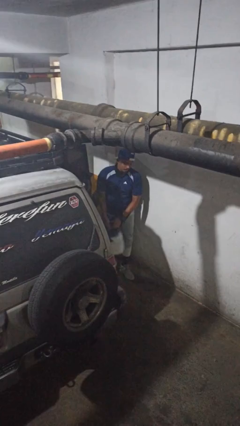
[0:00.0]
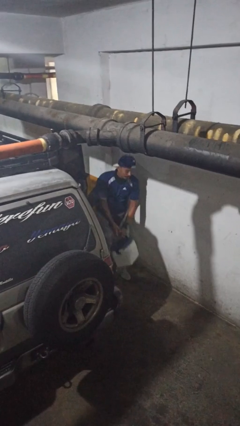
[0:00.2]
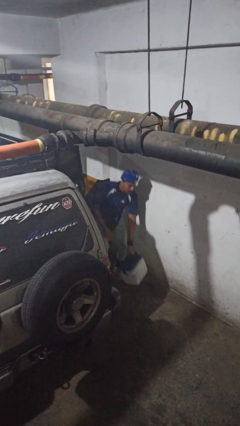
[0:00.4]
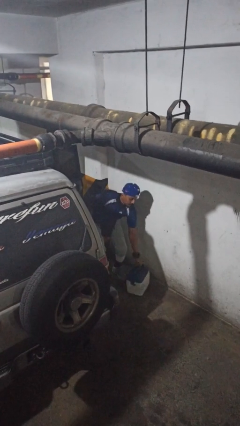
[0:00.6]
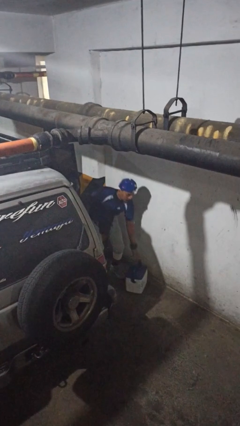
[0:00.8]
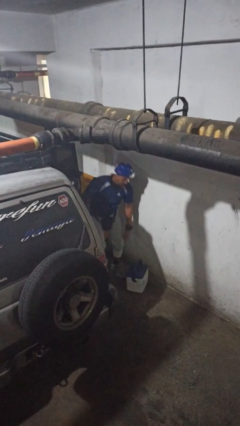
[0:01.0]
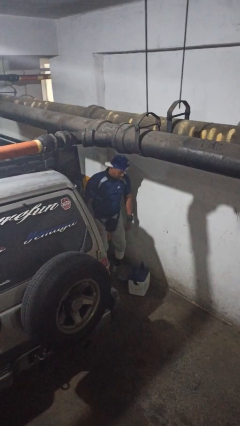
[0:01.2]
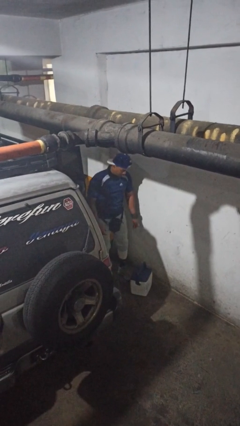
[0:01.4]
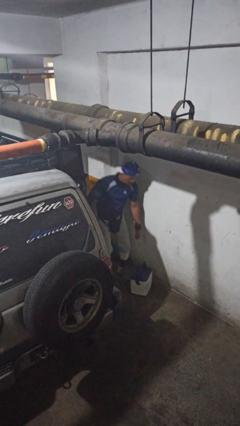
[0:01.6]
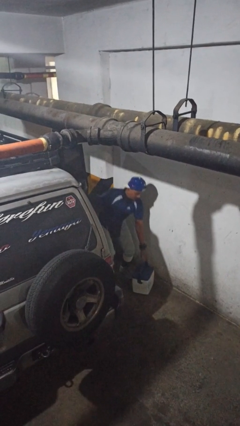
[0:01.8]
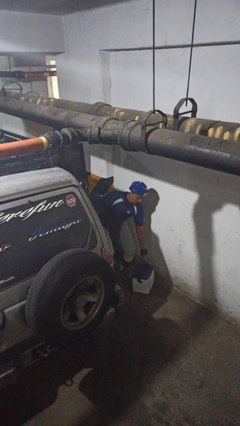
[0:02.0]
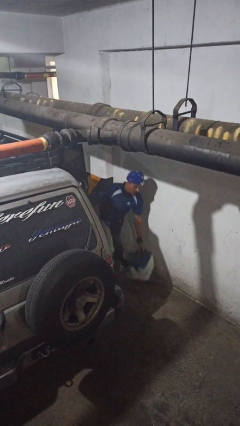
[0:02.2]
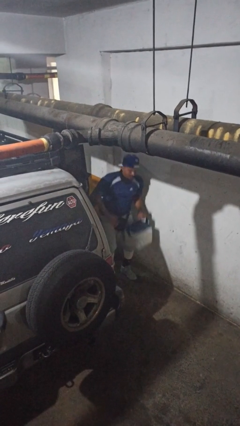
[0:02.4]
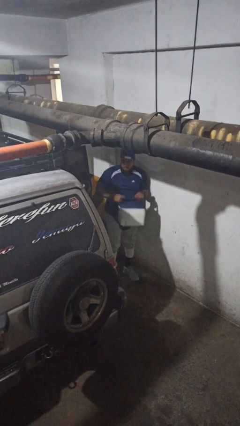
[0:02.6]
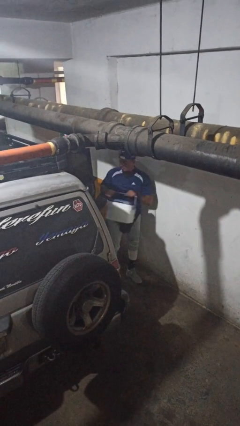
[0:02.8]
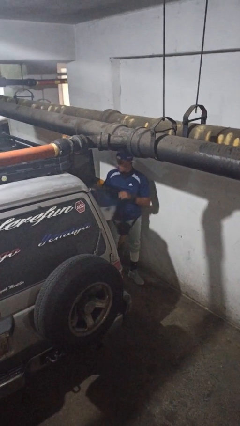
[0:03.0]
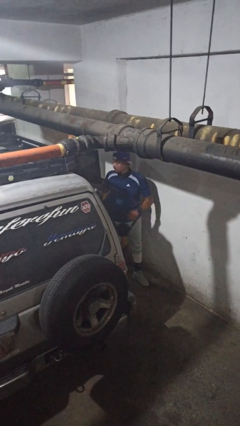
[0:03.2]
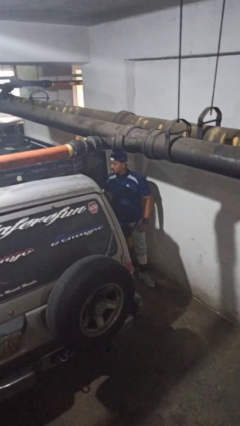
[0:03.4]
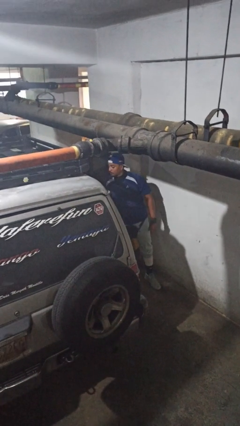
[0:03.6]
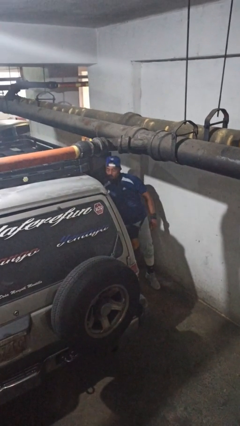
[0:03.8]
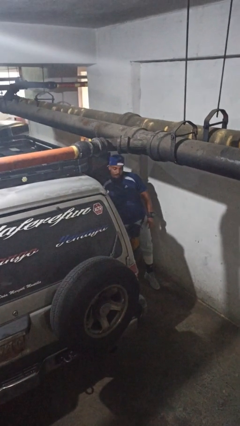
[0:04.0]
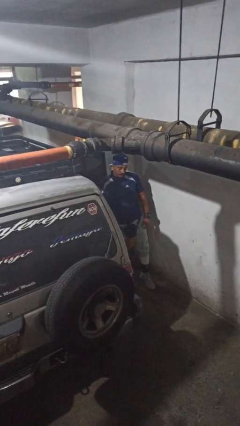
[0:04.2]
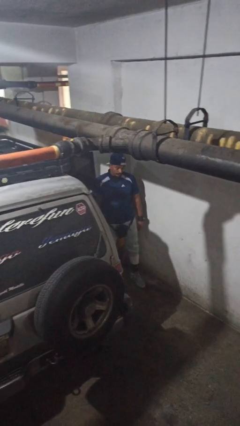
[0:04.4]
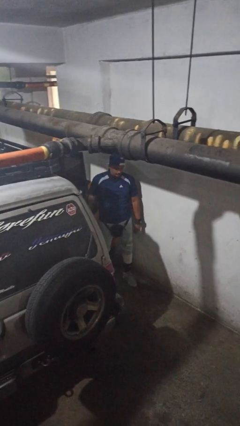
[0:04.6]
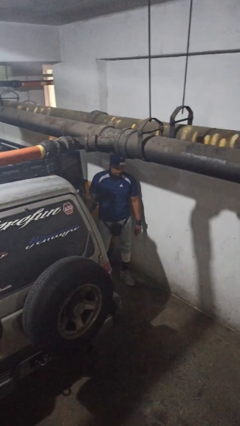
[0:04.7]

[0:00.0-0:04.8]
person loads car

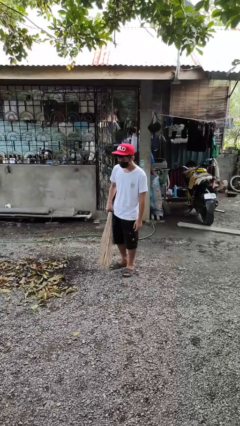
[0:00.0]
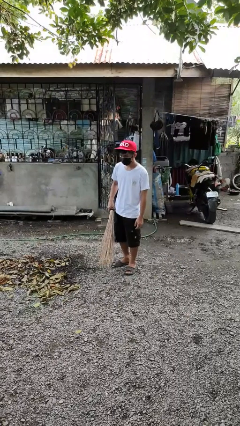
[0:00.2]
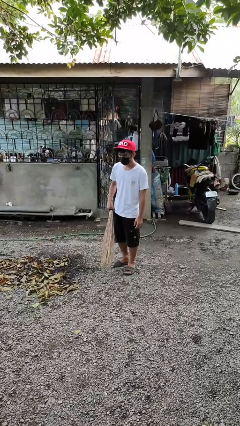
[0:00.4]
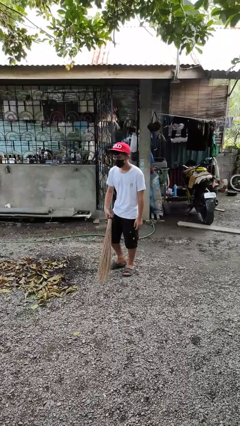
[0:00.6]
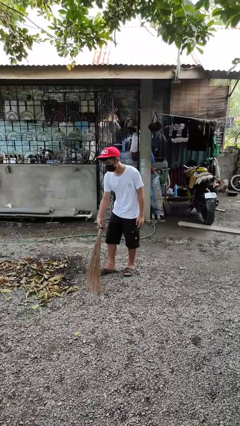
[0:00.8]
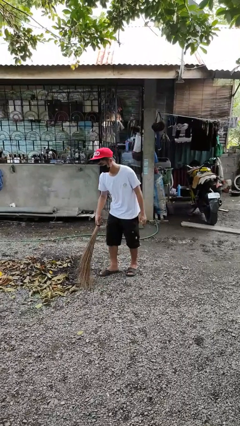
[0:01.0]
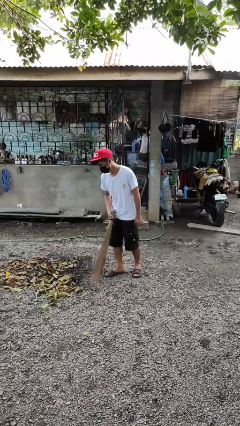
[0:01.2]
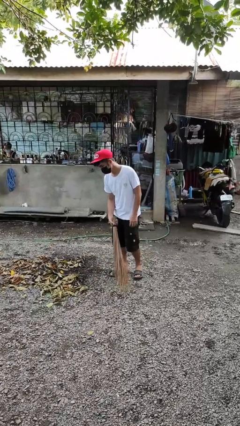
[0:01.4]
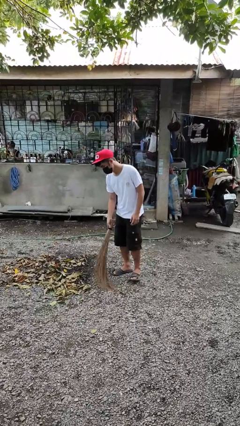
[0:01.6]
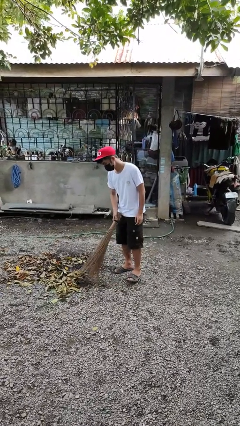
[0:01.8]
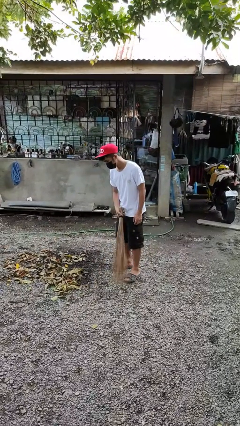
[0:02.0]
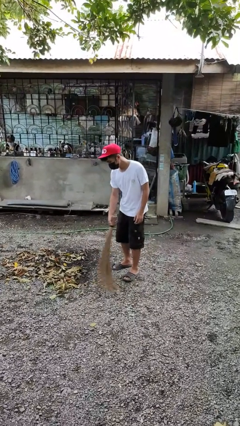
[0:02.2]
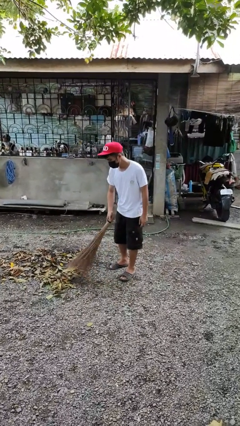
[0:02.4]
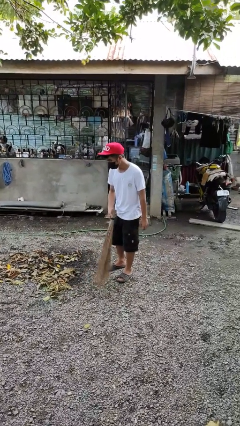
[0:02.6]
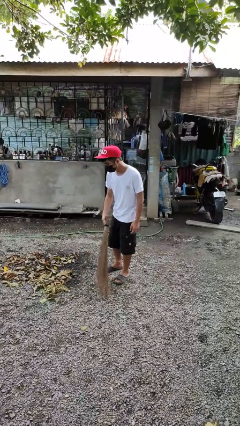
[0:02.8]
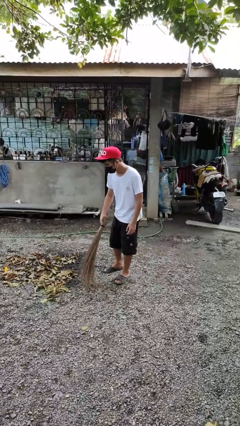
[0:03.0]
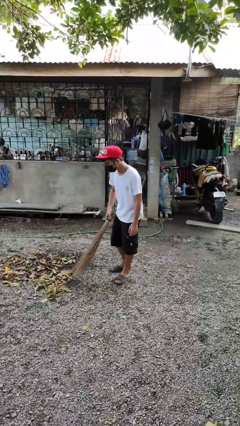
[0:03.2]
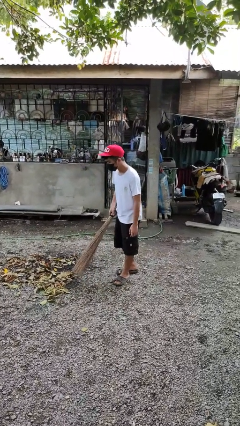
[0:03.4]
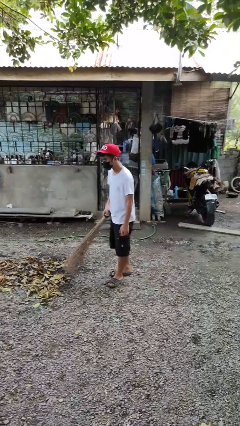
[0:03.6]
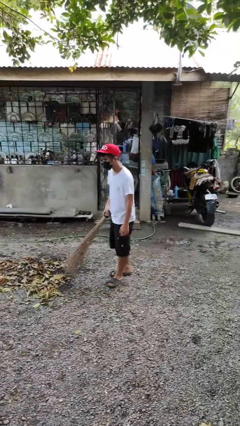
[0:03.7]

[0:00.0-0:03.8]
person sweeps floor

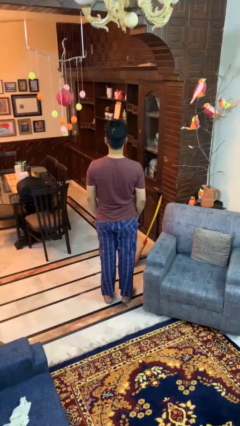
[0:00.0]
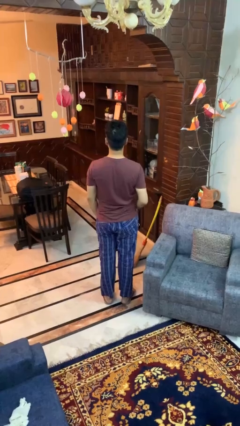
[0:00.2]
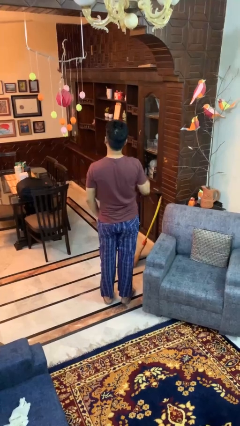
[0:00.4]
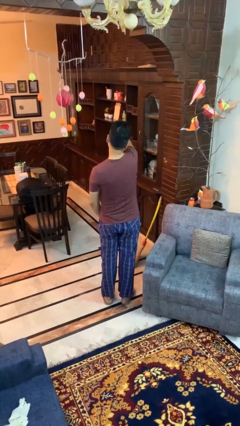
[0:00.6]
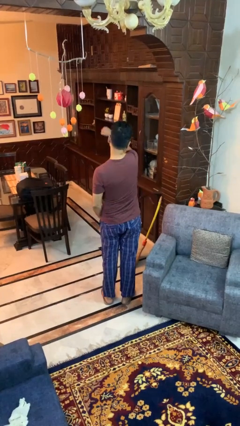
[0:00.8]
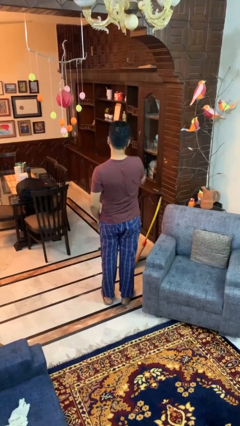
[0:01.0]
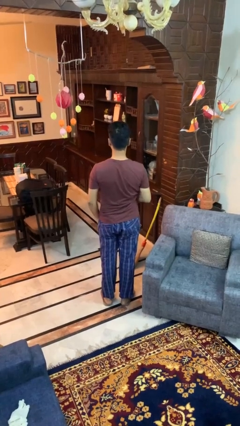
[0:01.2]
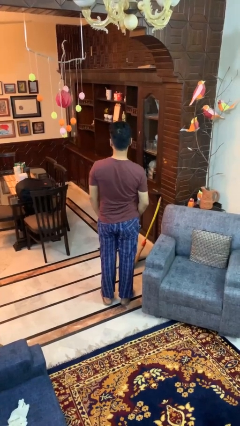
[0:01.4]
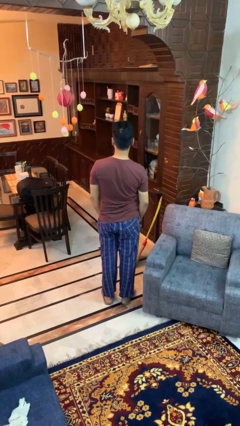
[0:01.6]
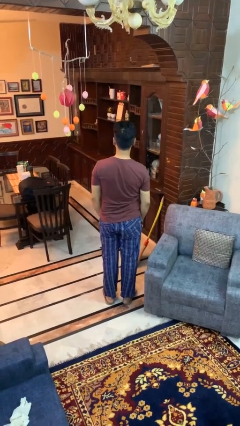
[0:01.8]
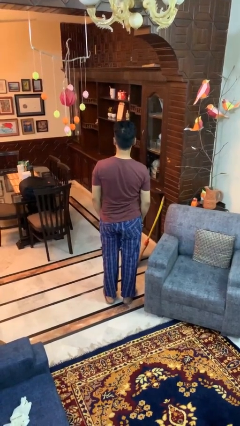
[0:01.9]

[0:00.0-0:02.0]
person karate chop

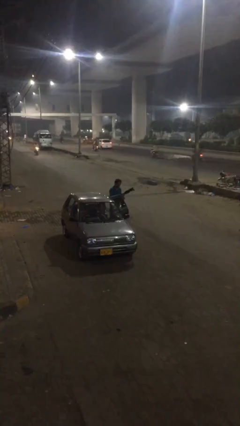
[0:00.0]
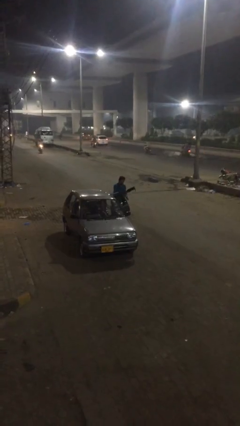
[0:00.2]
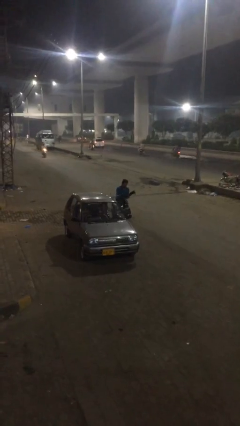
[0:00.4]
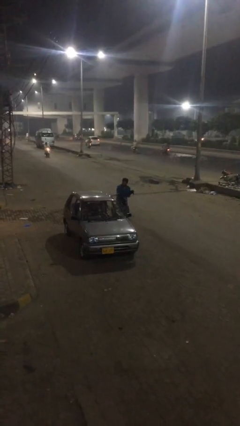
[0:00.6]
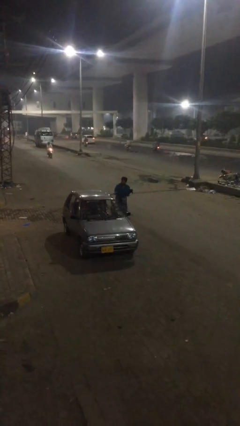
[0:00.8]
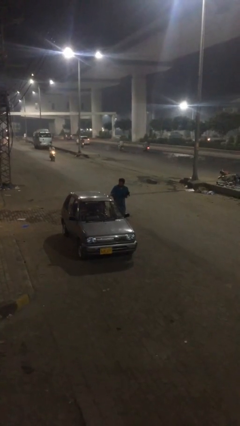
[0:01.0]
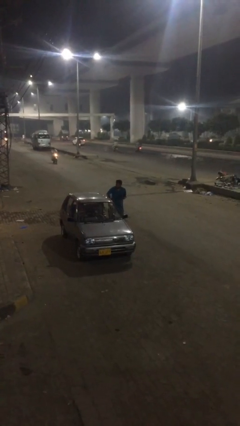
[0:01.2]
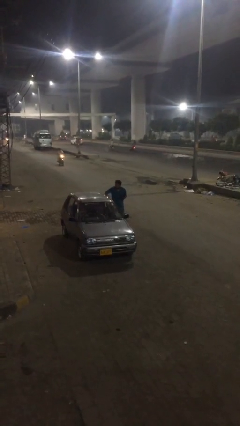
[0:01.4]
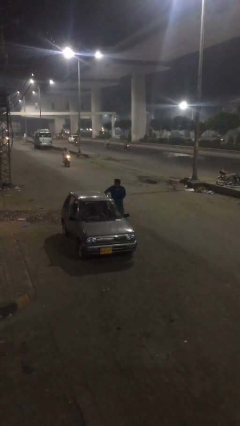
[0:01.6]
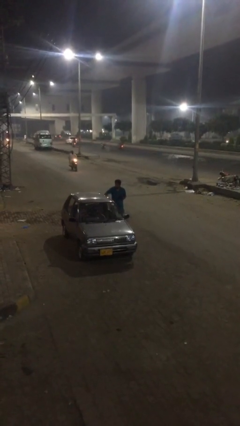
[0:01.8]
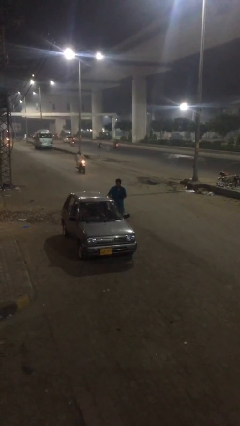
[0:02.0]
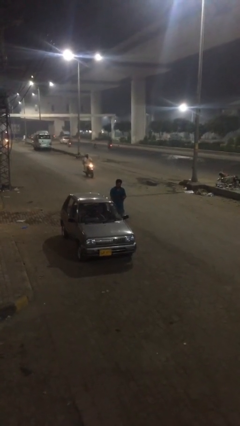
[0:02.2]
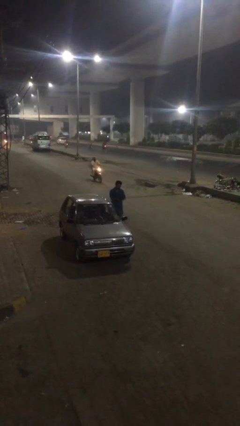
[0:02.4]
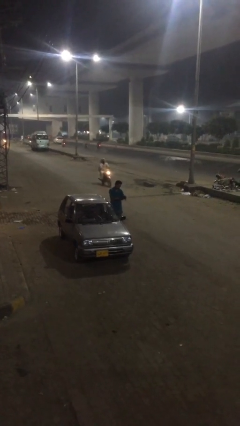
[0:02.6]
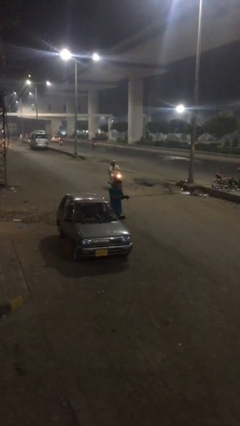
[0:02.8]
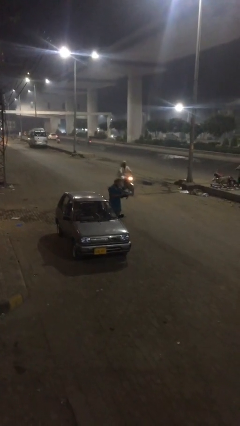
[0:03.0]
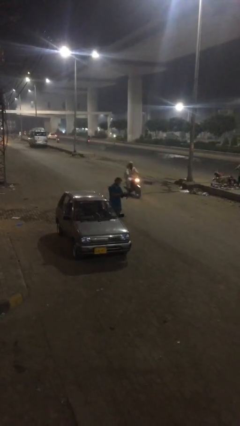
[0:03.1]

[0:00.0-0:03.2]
person closes car door

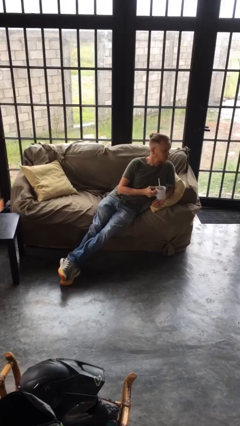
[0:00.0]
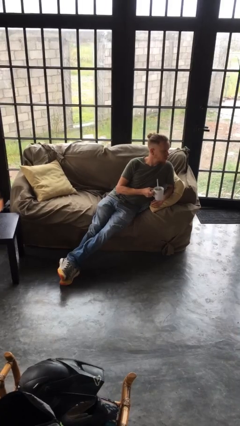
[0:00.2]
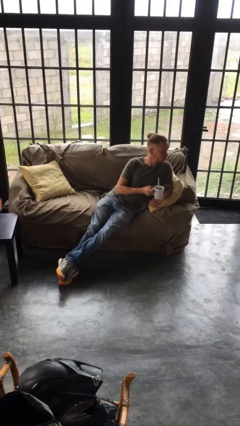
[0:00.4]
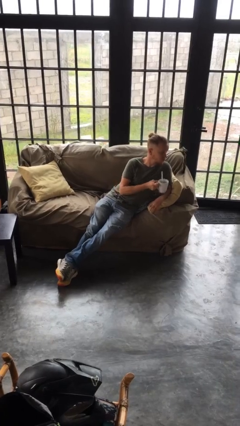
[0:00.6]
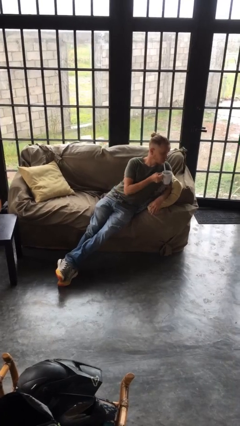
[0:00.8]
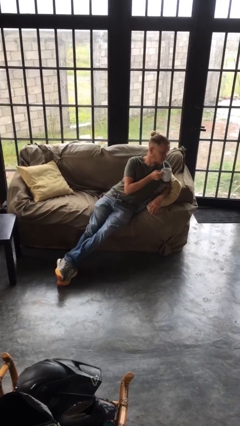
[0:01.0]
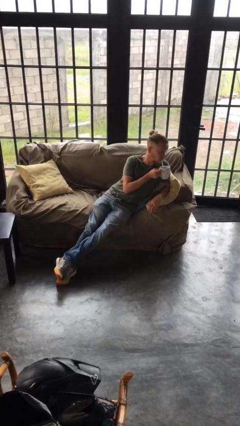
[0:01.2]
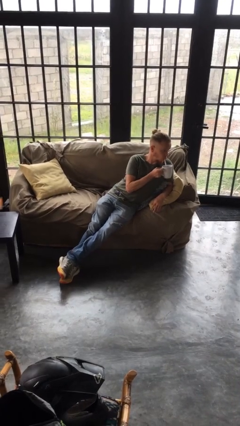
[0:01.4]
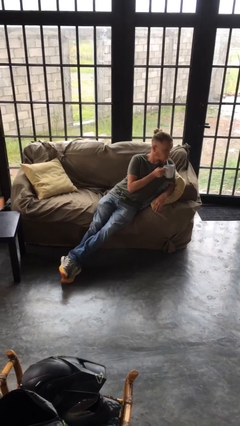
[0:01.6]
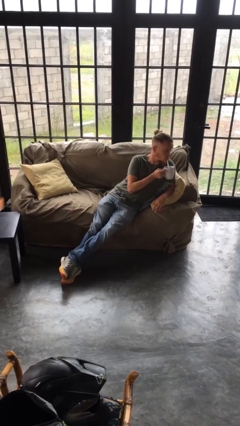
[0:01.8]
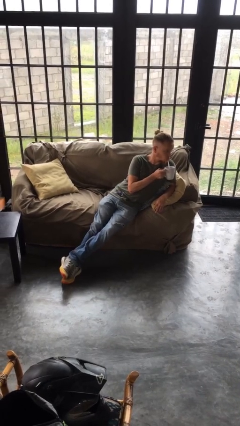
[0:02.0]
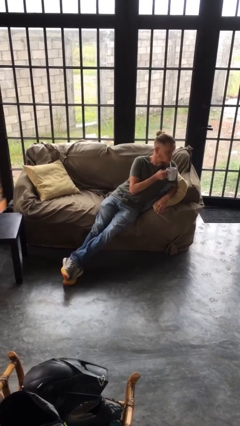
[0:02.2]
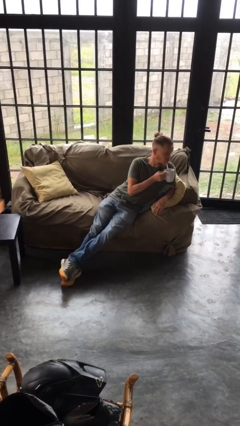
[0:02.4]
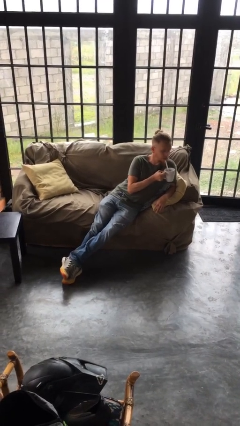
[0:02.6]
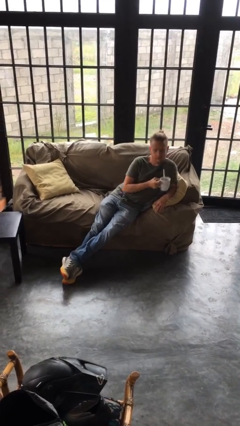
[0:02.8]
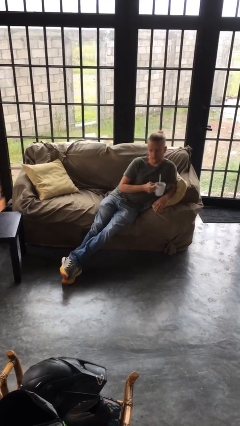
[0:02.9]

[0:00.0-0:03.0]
person drinks from straw

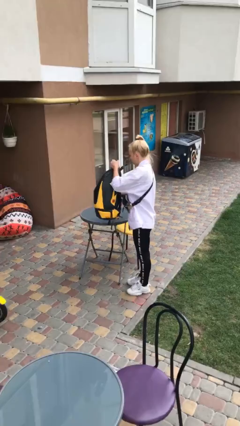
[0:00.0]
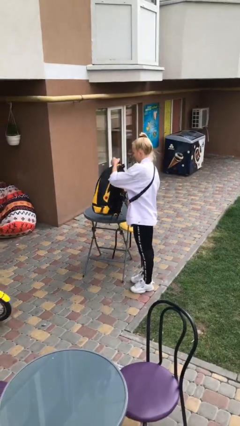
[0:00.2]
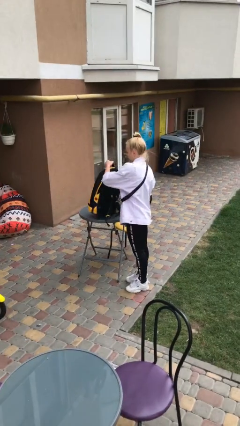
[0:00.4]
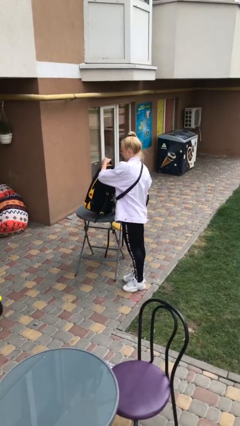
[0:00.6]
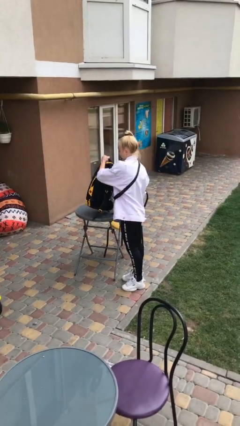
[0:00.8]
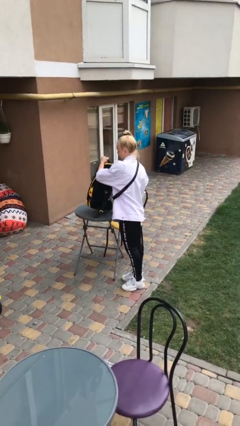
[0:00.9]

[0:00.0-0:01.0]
person puts down object on table
